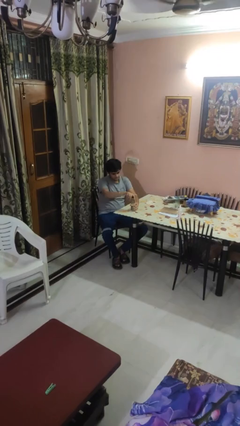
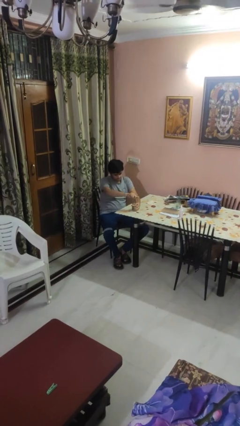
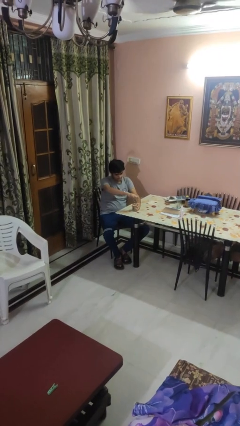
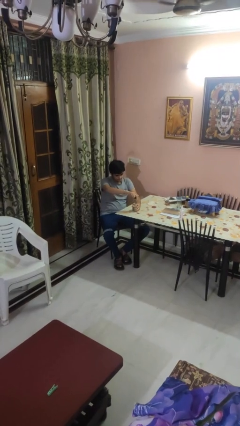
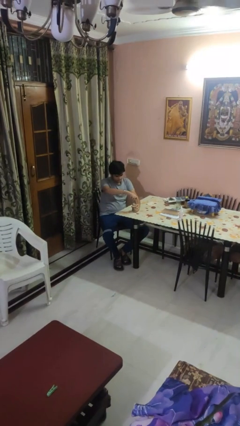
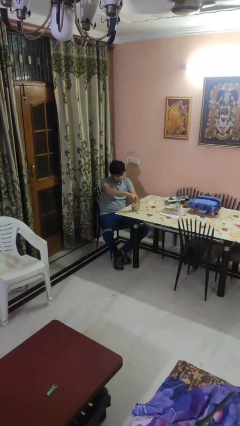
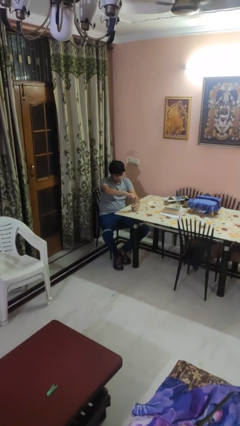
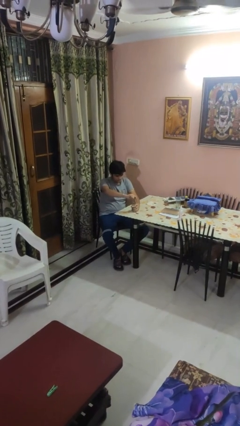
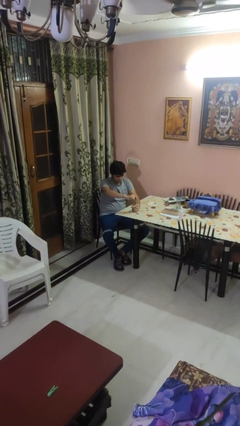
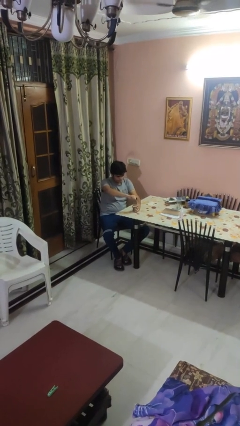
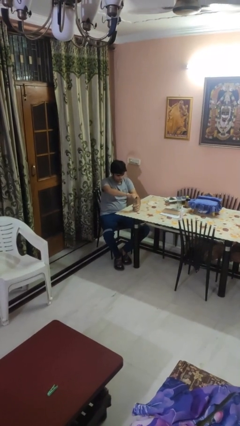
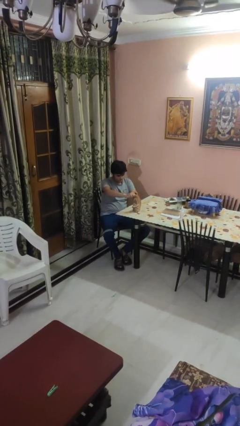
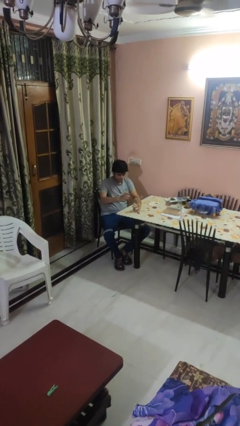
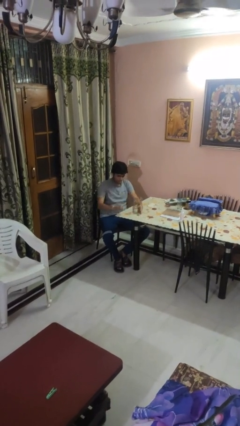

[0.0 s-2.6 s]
person unscrews lid from bottle

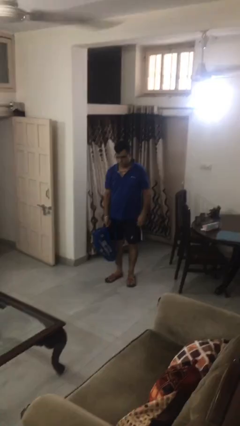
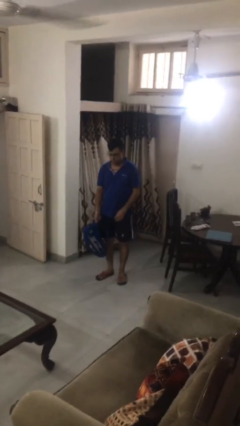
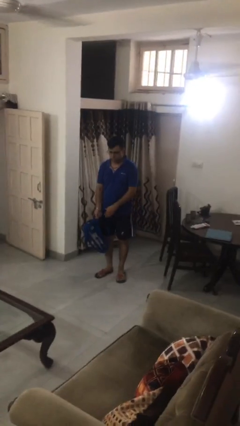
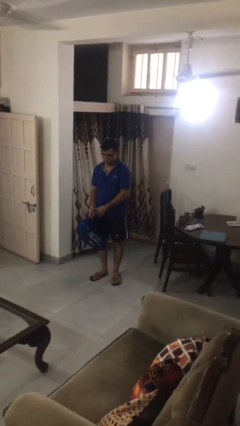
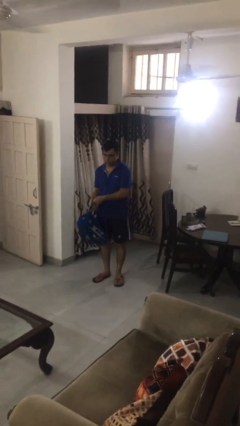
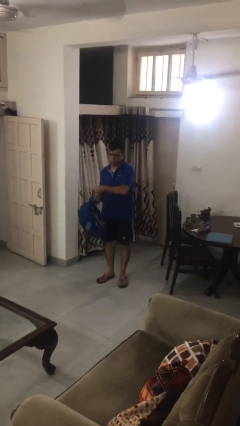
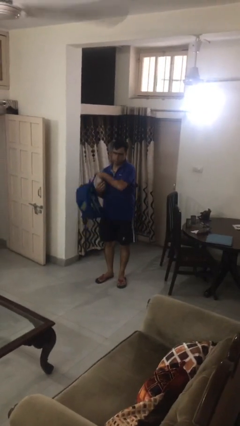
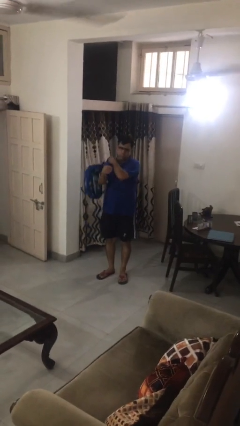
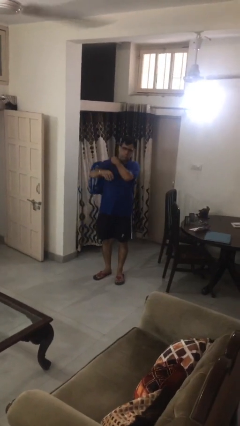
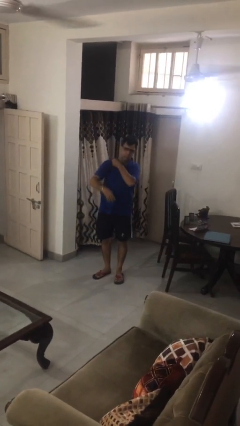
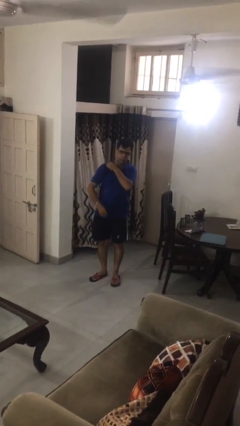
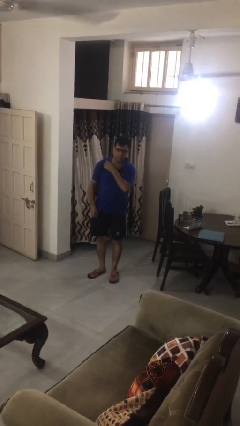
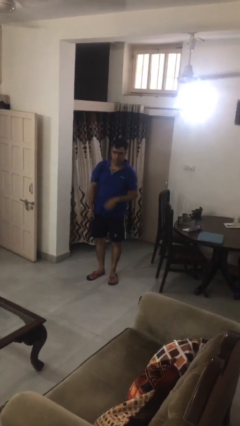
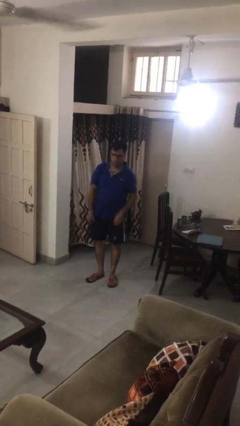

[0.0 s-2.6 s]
person puts on backpack

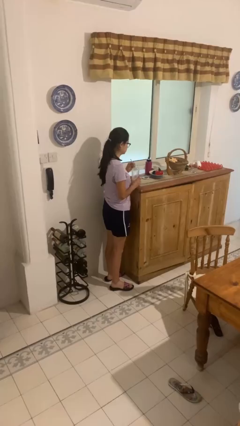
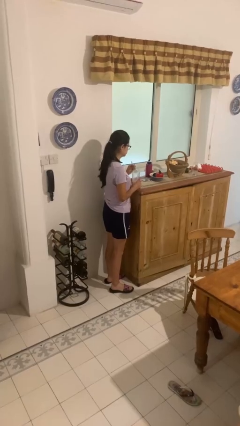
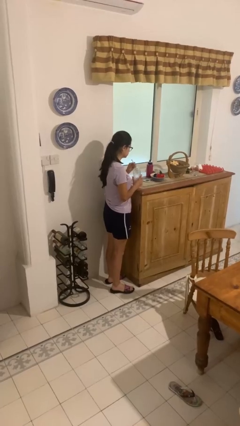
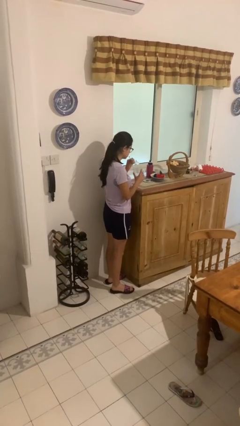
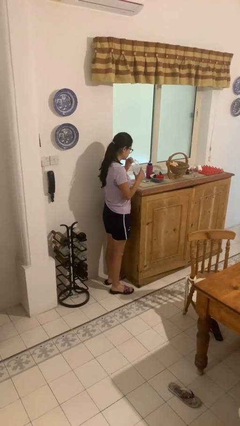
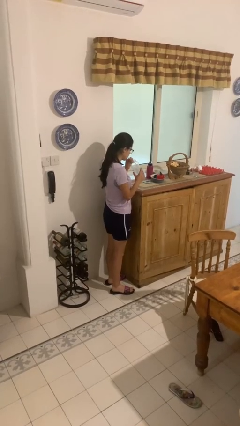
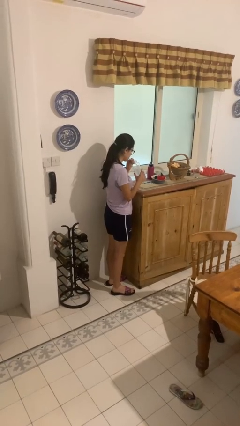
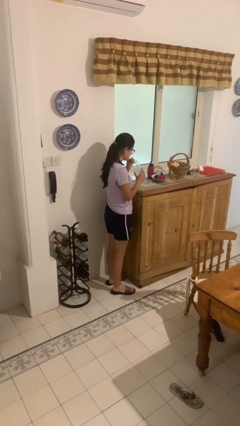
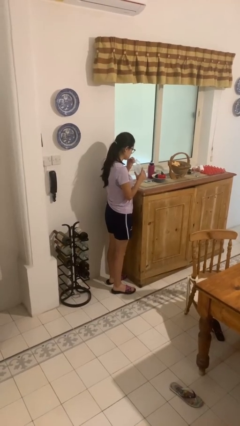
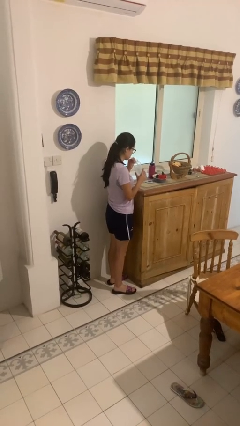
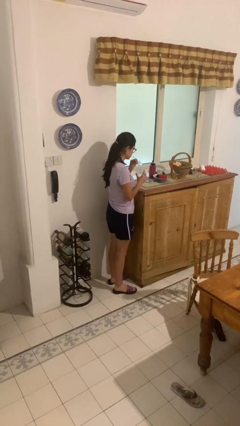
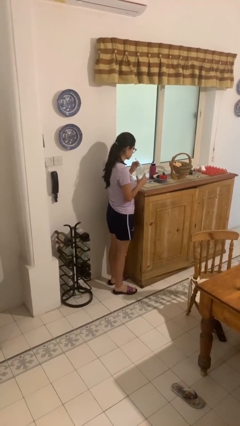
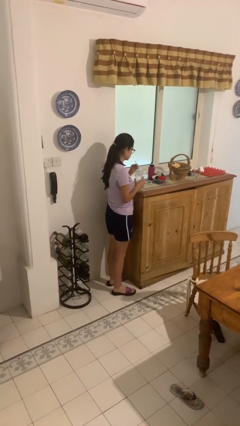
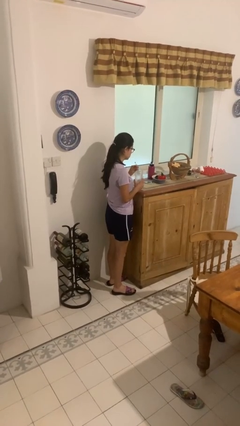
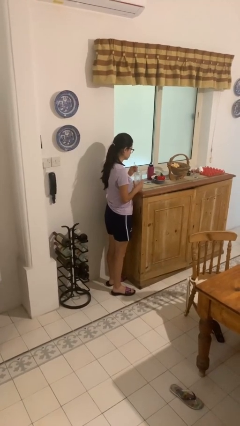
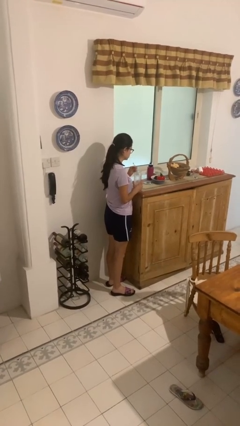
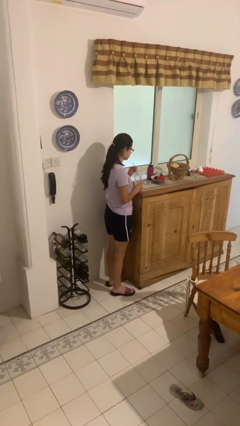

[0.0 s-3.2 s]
person drinks from straw

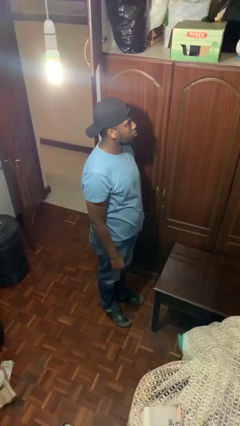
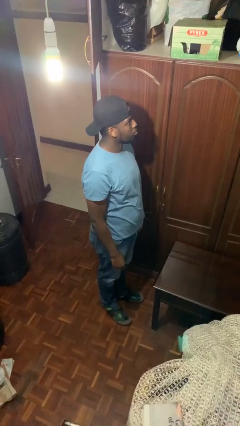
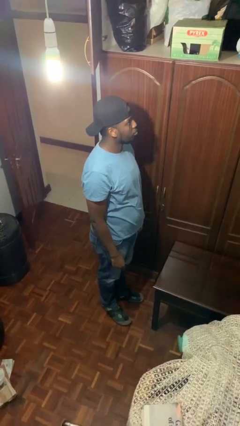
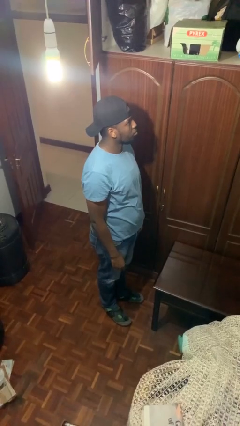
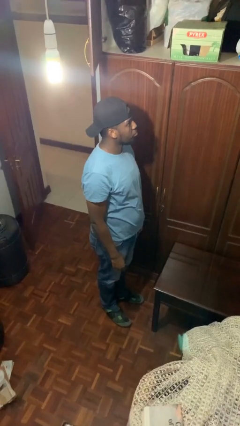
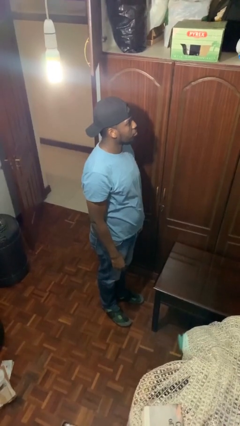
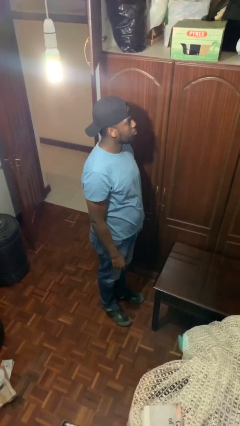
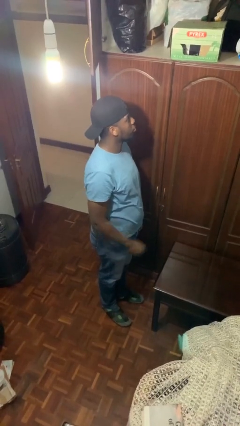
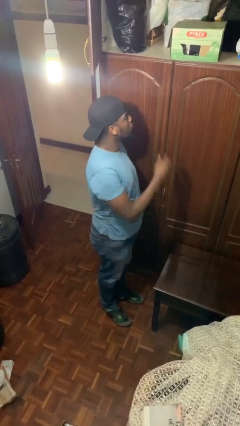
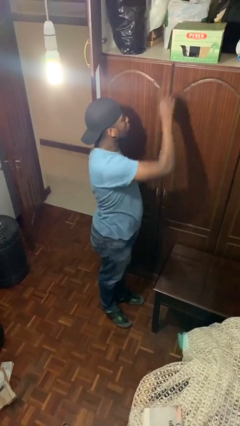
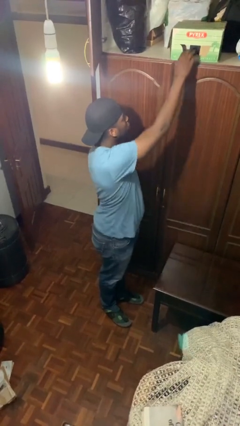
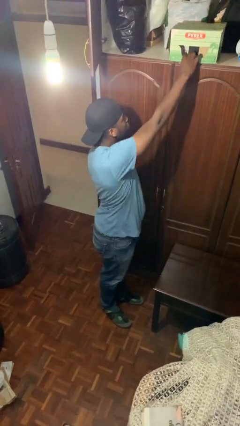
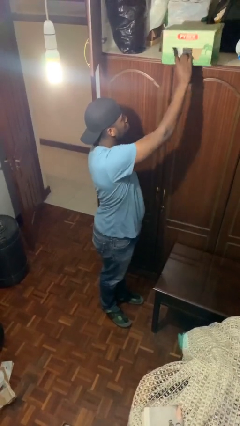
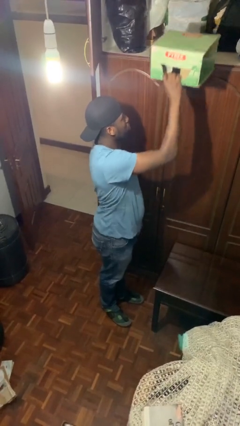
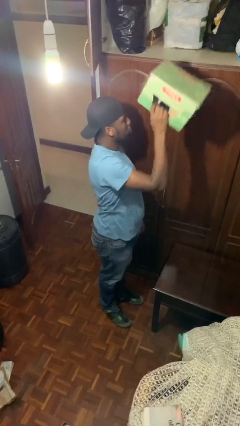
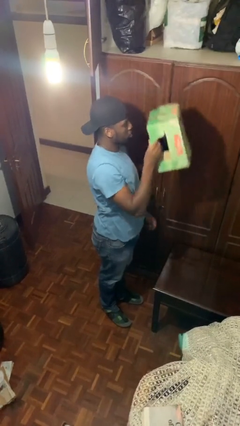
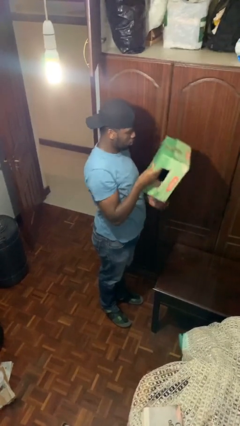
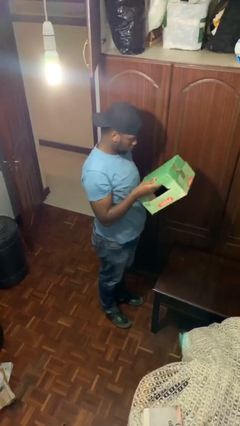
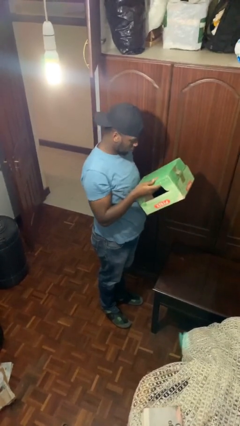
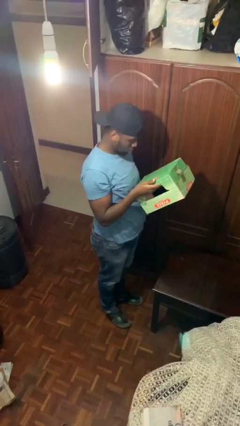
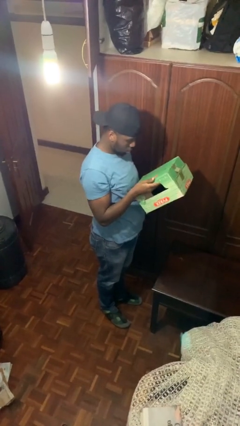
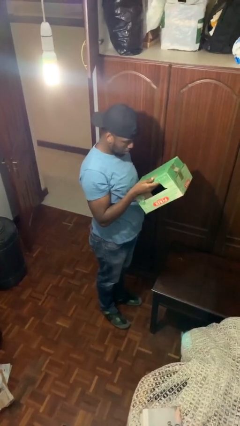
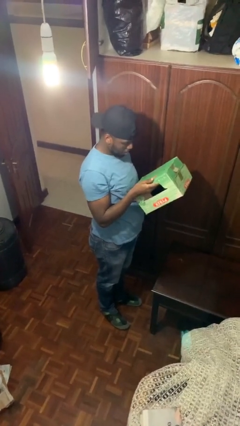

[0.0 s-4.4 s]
person picks up object from shelf

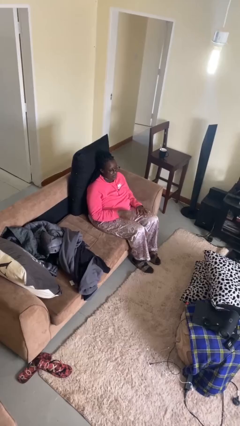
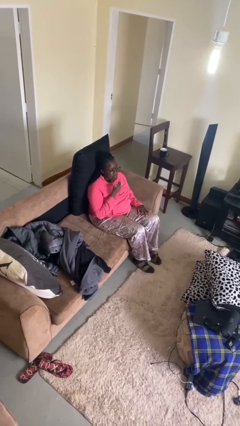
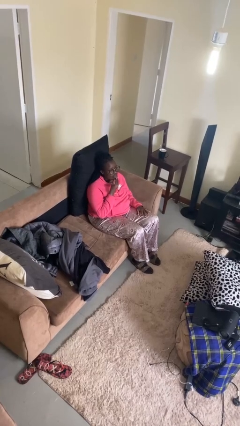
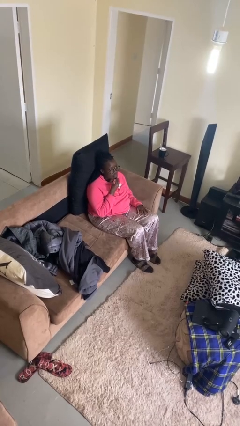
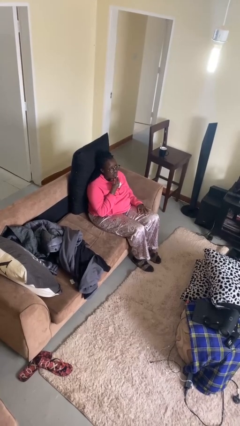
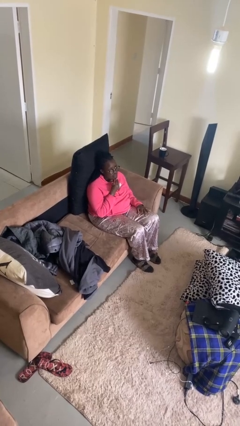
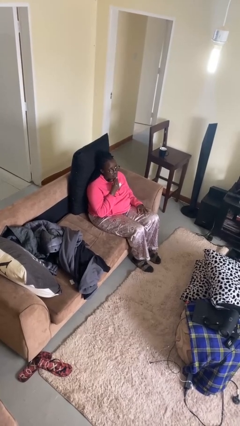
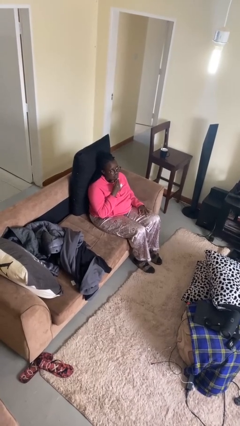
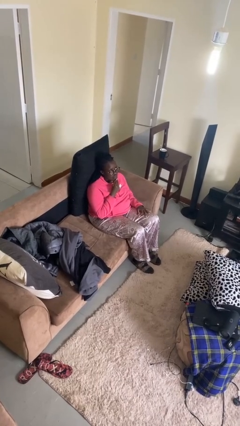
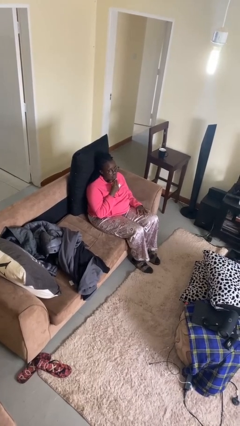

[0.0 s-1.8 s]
person strokes chin

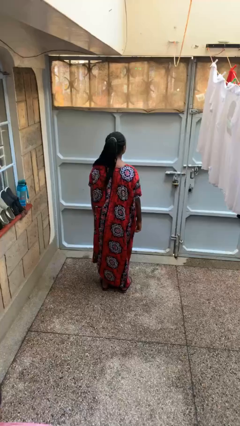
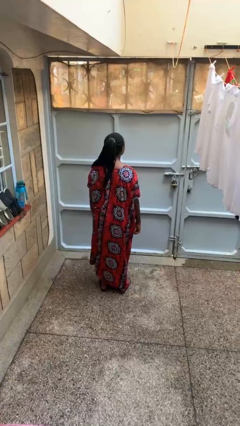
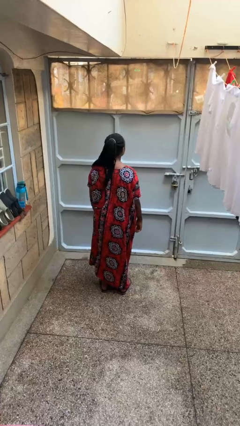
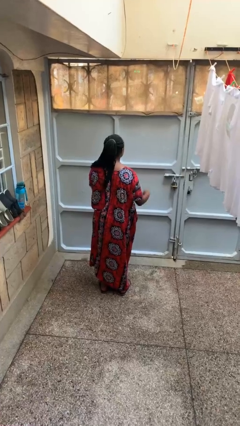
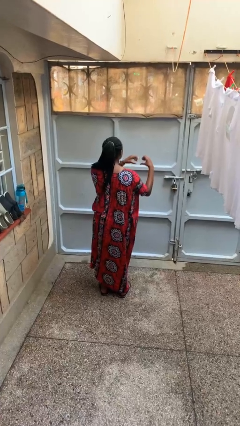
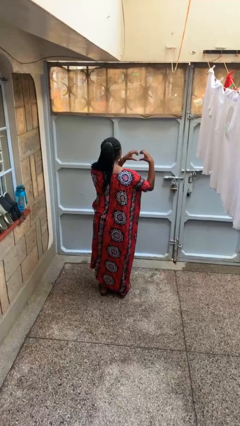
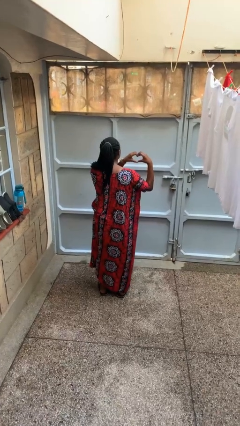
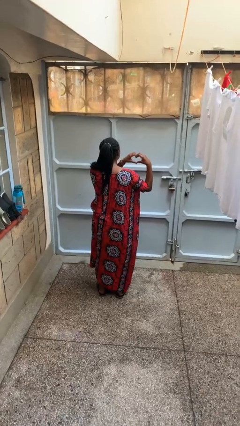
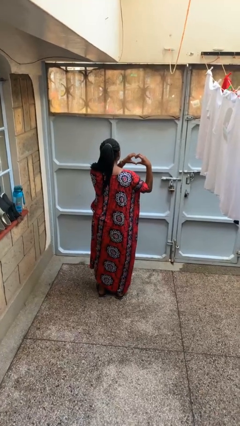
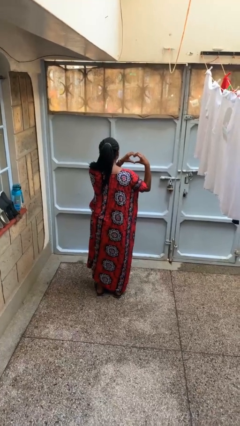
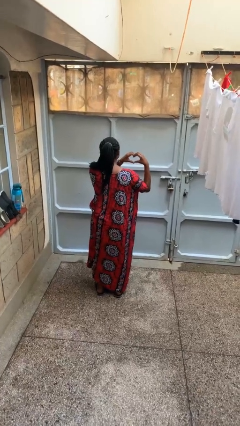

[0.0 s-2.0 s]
person gestures heart

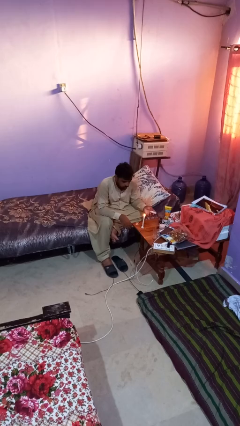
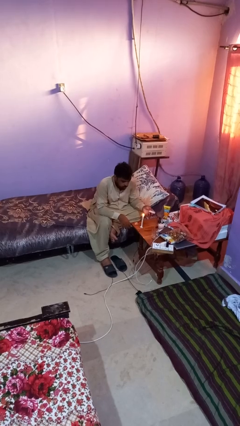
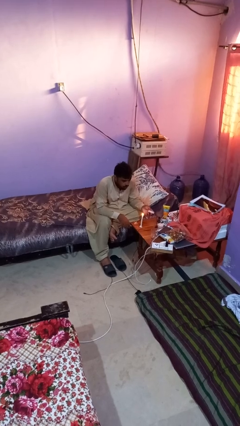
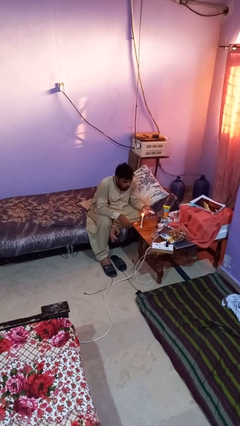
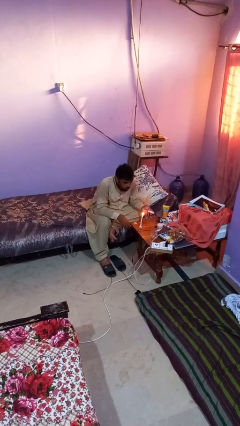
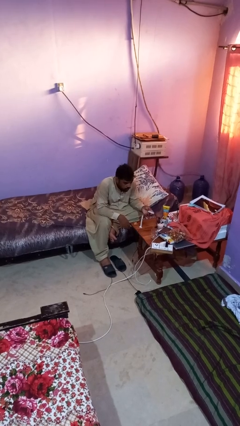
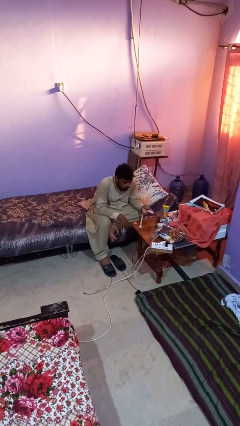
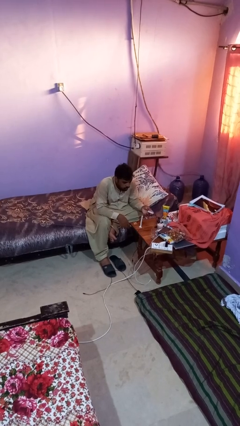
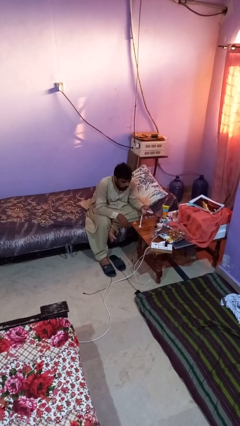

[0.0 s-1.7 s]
person extinguishes candle
